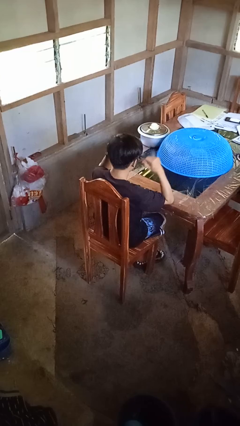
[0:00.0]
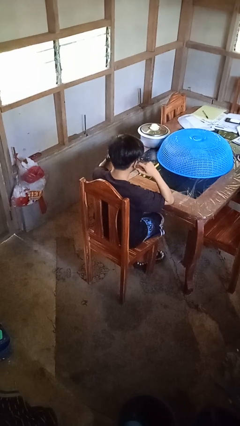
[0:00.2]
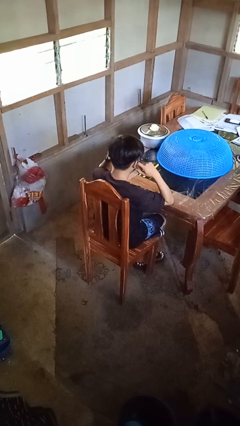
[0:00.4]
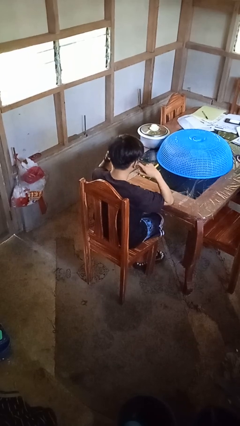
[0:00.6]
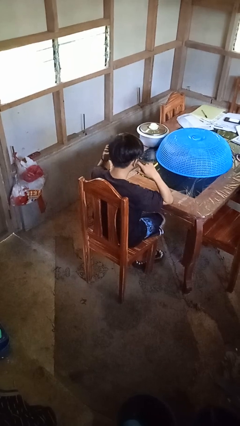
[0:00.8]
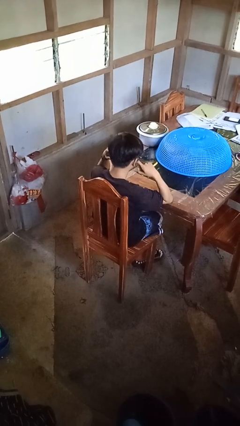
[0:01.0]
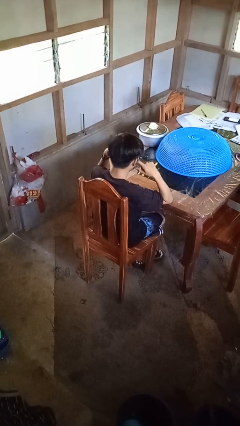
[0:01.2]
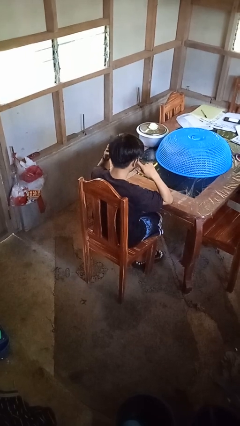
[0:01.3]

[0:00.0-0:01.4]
person puts fingers in ear

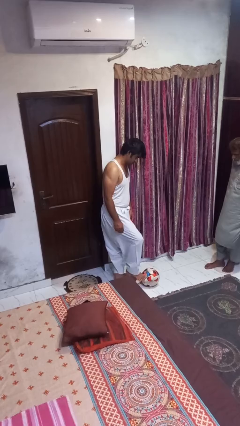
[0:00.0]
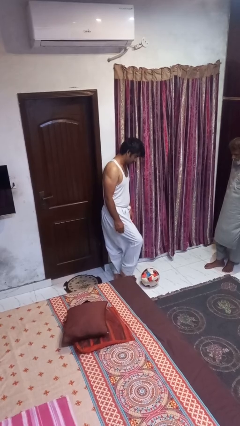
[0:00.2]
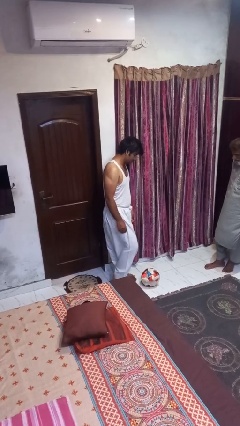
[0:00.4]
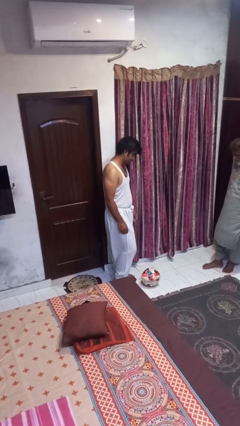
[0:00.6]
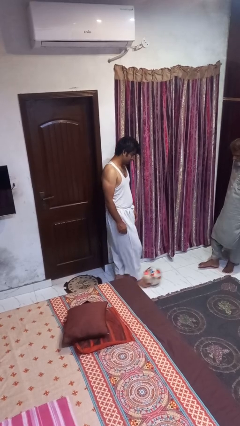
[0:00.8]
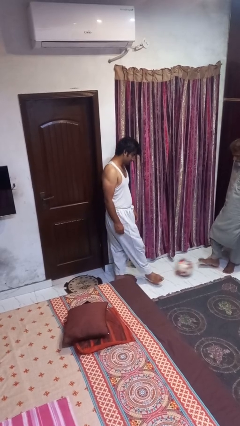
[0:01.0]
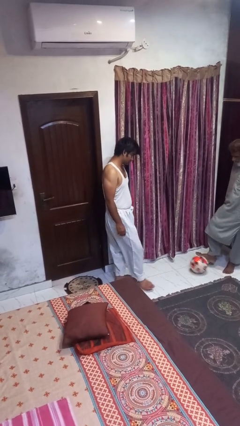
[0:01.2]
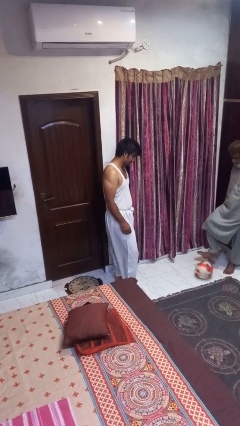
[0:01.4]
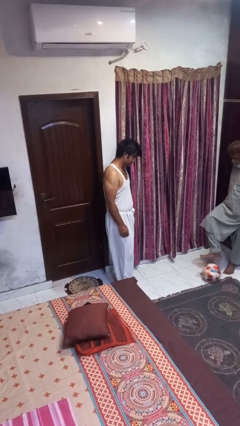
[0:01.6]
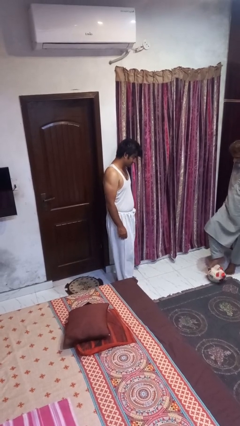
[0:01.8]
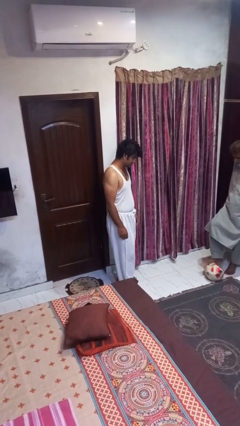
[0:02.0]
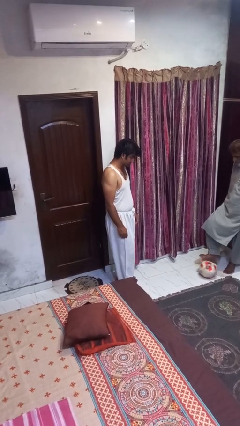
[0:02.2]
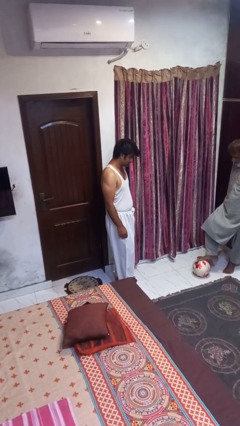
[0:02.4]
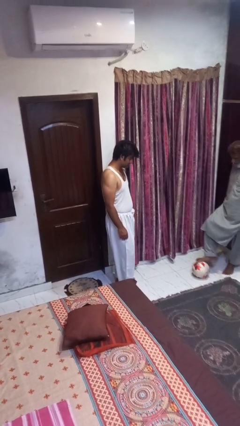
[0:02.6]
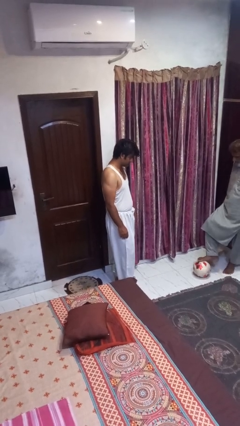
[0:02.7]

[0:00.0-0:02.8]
person kicks object to person

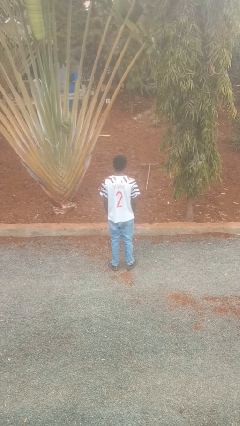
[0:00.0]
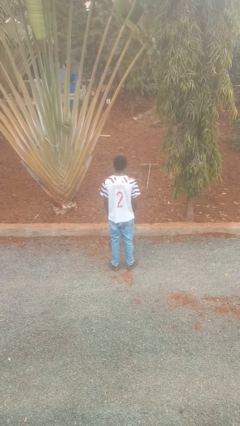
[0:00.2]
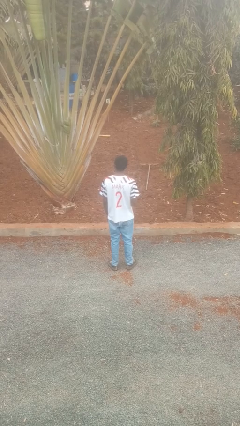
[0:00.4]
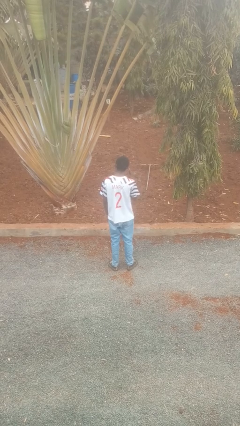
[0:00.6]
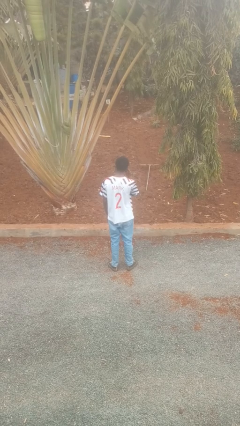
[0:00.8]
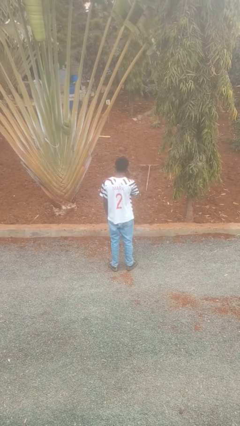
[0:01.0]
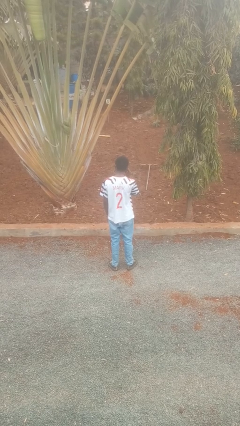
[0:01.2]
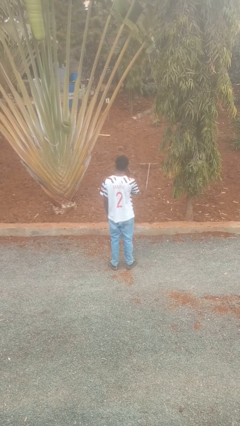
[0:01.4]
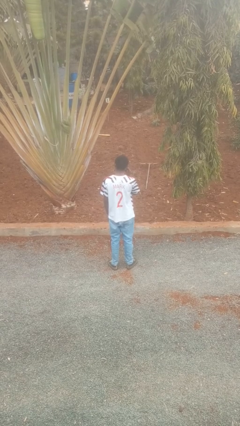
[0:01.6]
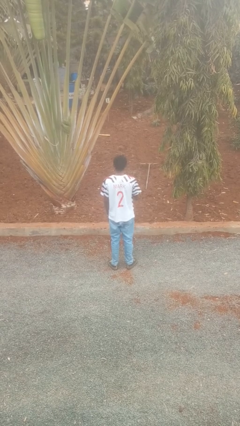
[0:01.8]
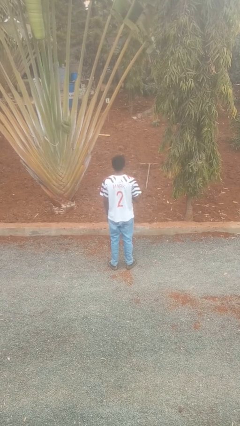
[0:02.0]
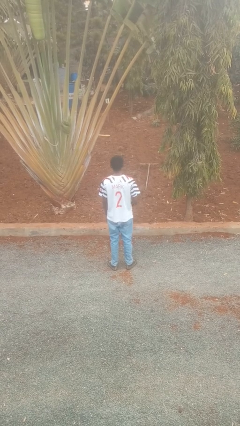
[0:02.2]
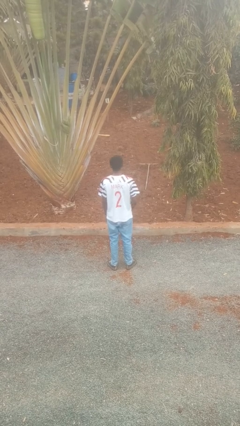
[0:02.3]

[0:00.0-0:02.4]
person gestures listen closely

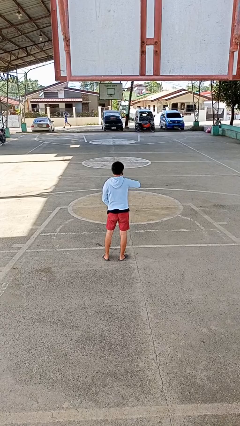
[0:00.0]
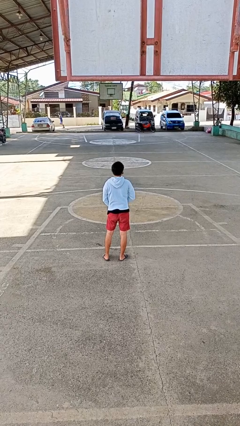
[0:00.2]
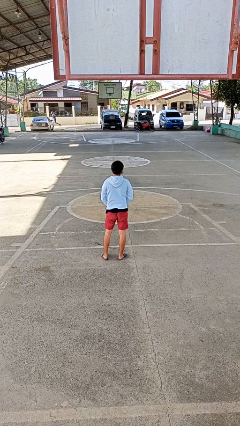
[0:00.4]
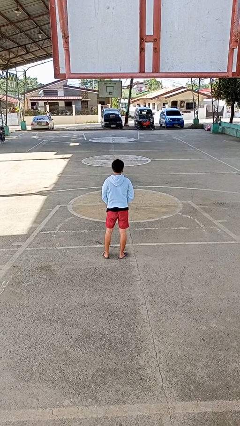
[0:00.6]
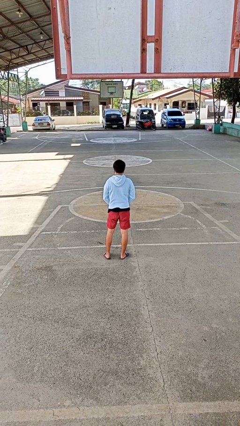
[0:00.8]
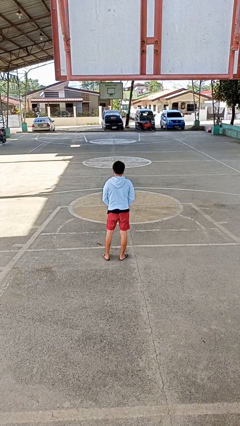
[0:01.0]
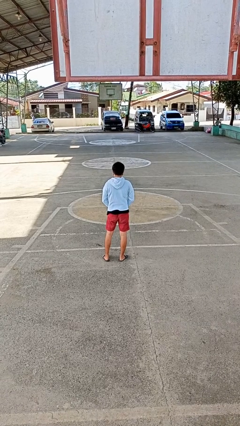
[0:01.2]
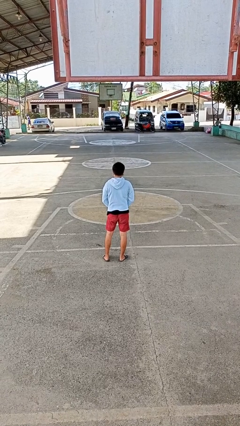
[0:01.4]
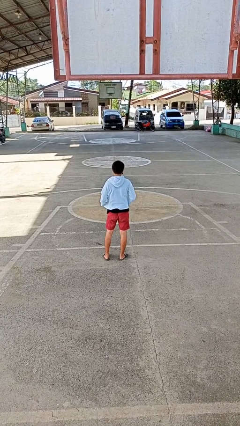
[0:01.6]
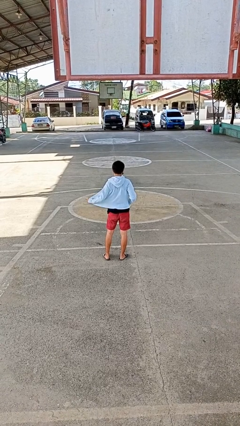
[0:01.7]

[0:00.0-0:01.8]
person unzips jacket

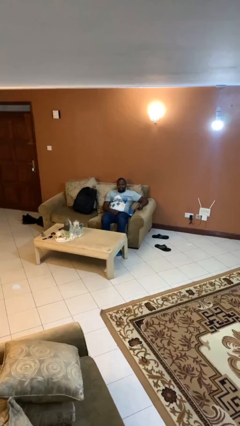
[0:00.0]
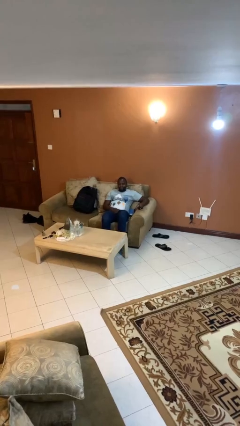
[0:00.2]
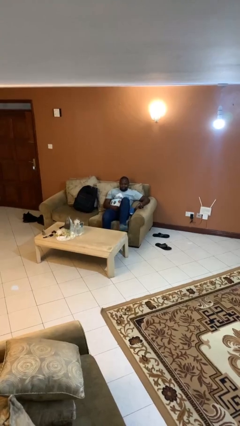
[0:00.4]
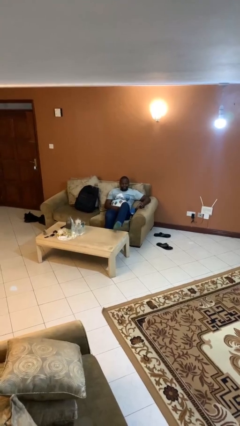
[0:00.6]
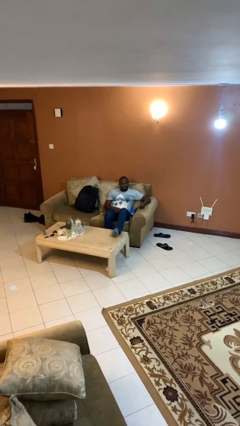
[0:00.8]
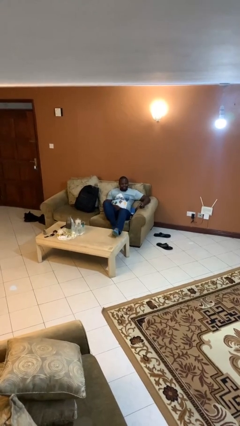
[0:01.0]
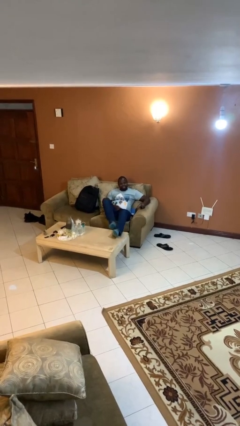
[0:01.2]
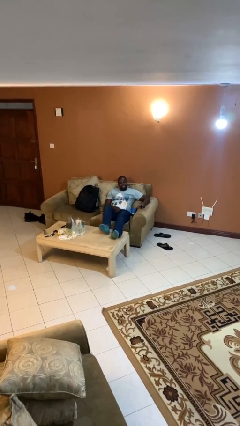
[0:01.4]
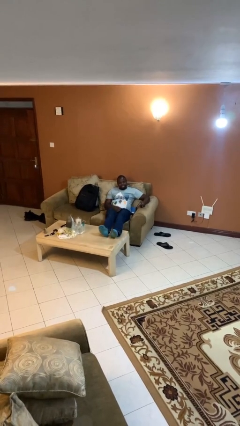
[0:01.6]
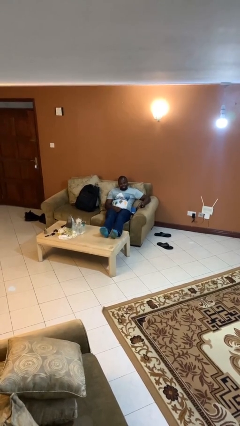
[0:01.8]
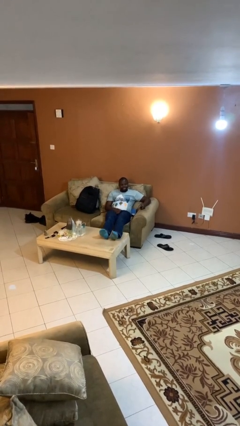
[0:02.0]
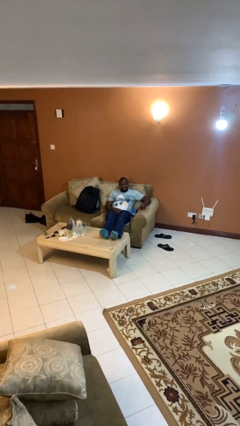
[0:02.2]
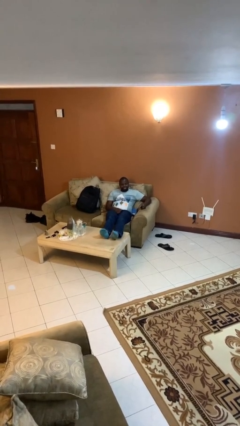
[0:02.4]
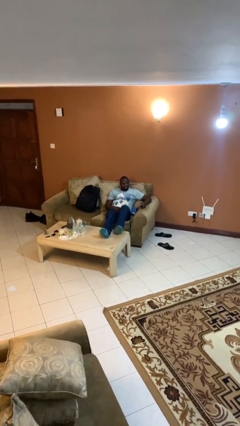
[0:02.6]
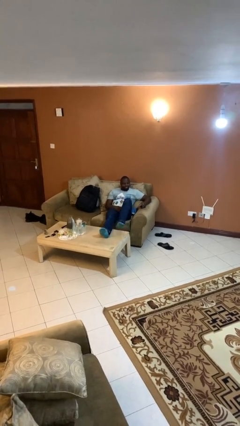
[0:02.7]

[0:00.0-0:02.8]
person puts feet up

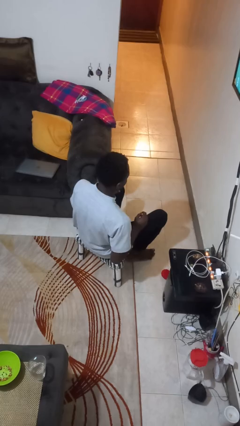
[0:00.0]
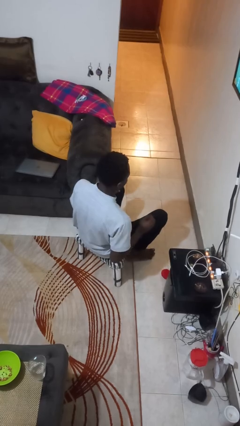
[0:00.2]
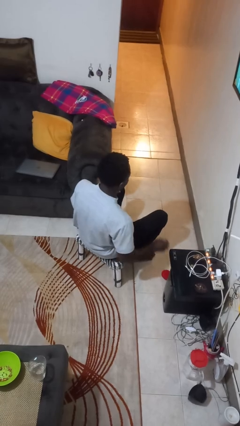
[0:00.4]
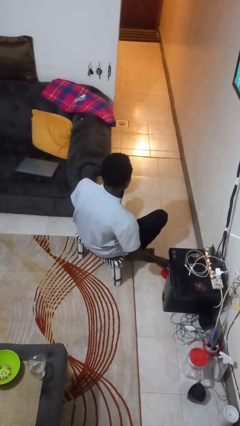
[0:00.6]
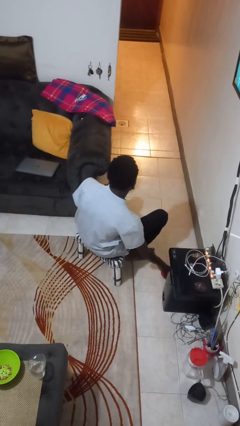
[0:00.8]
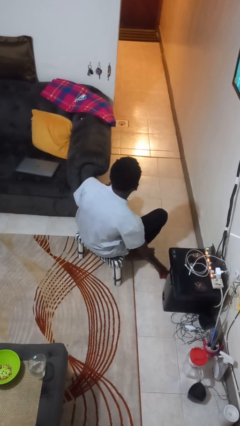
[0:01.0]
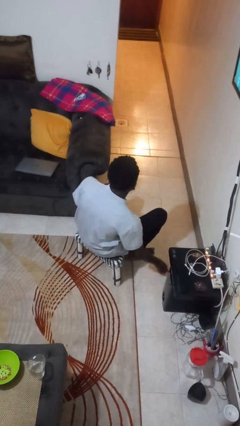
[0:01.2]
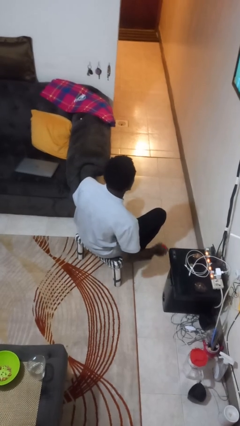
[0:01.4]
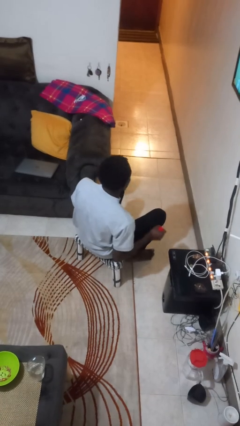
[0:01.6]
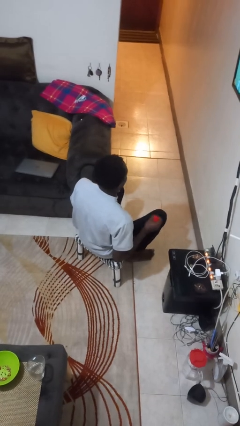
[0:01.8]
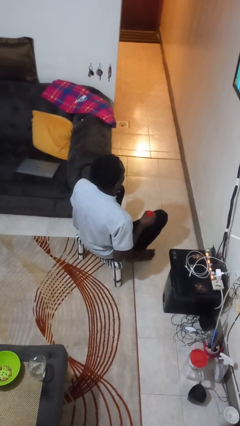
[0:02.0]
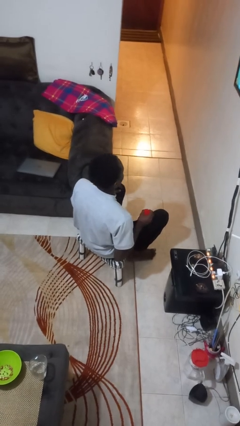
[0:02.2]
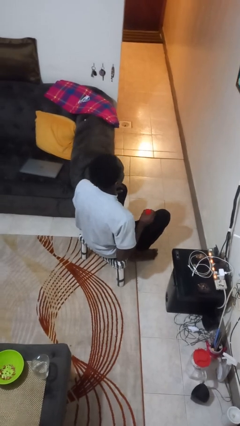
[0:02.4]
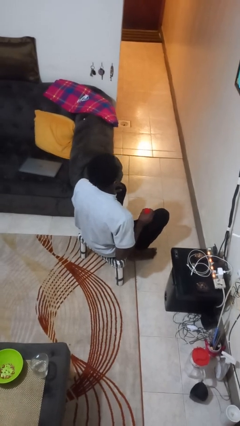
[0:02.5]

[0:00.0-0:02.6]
person picks up object from floor

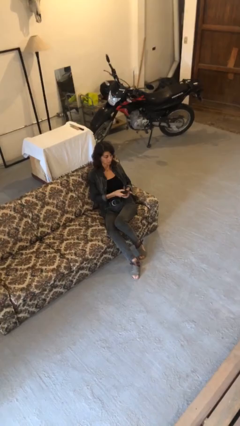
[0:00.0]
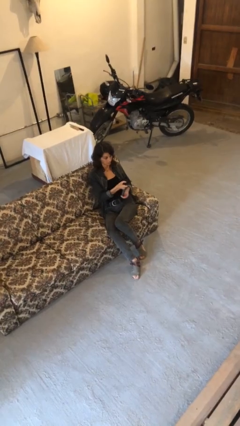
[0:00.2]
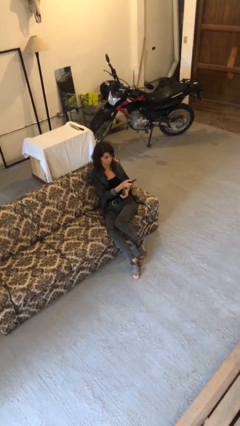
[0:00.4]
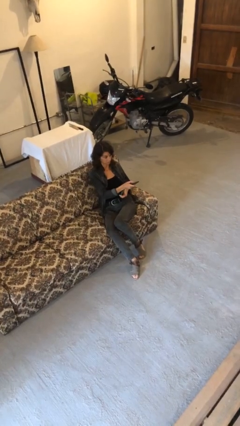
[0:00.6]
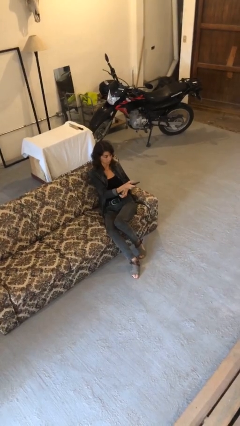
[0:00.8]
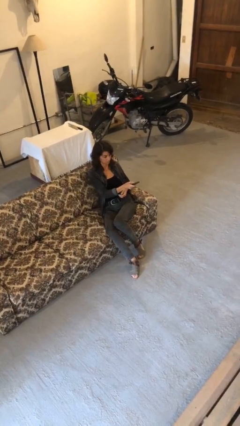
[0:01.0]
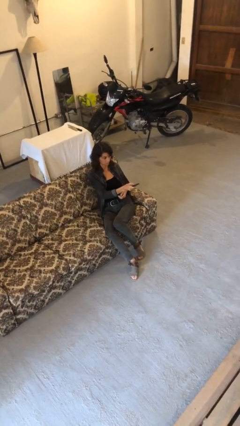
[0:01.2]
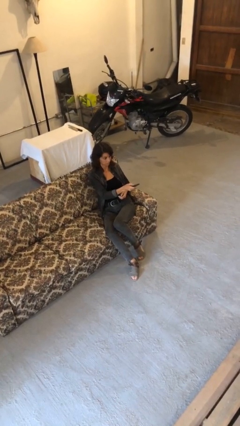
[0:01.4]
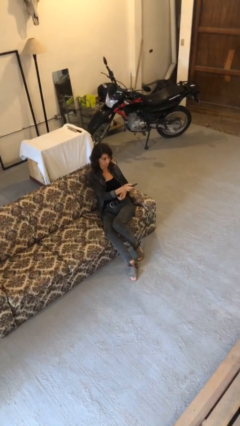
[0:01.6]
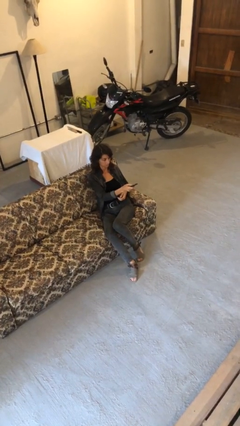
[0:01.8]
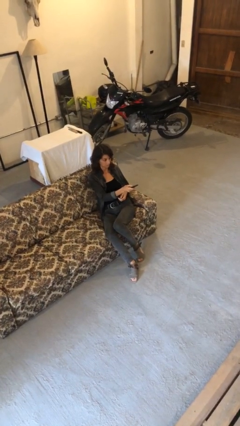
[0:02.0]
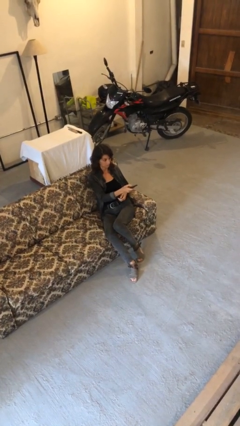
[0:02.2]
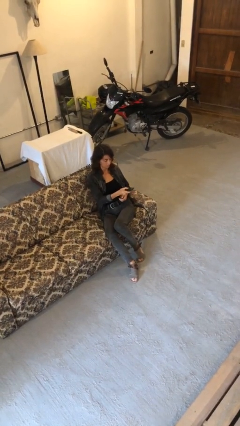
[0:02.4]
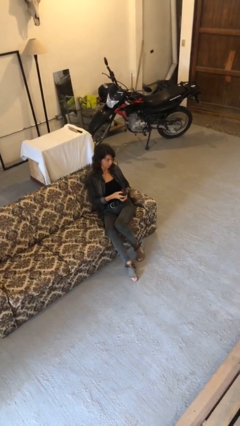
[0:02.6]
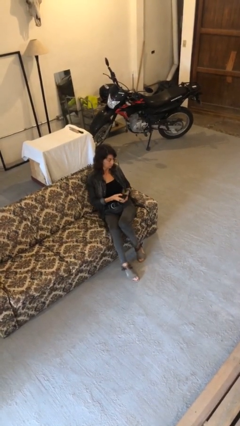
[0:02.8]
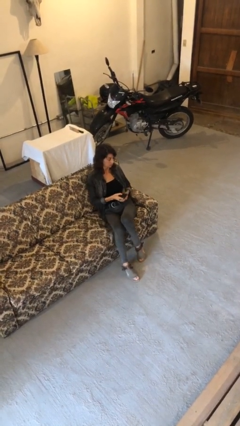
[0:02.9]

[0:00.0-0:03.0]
person uses television remote

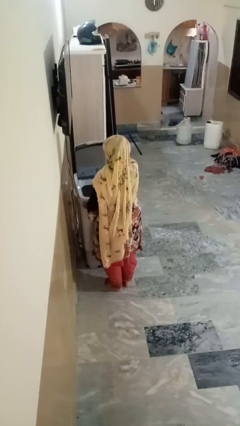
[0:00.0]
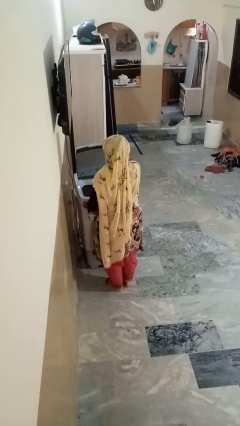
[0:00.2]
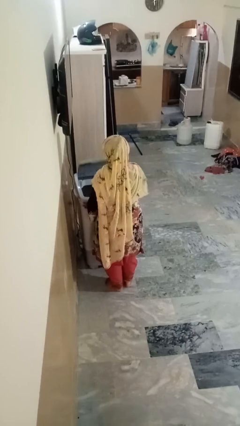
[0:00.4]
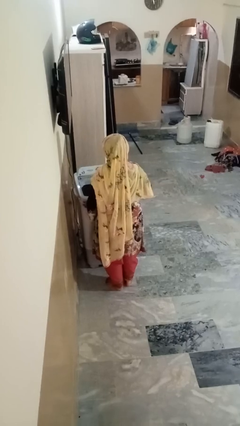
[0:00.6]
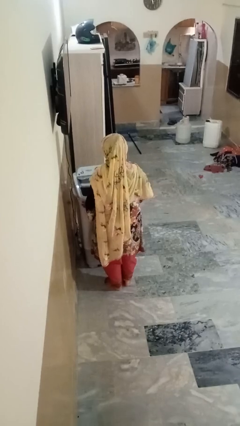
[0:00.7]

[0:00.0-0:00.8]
person closes clothes washer
